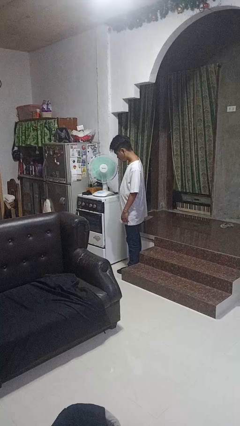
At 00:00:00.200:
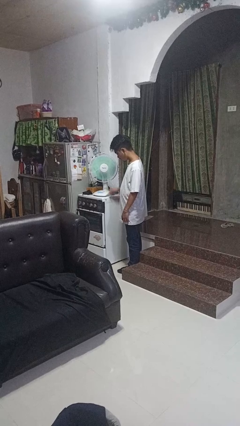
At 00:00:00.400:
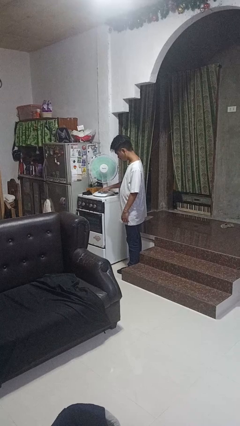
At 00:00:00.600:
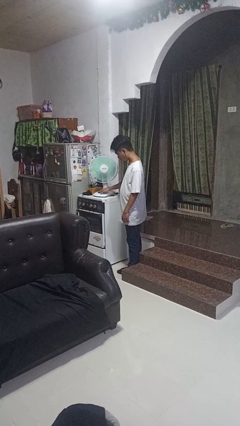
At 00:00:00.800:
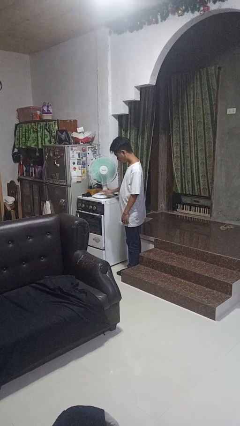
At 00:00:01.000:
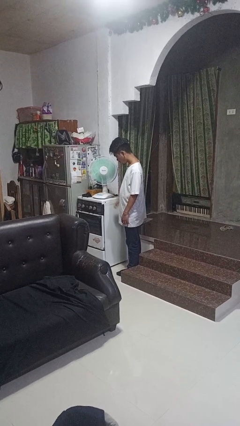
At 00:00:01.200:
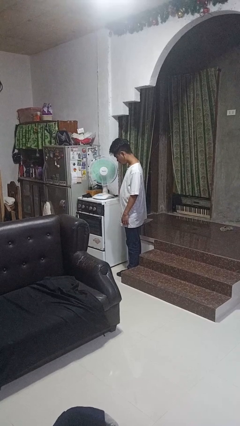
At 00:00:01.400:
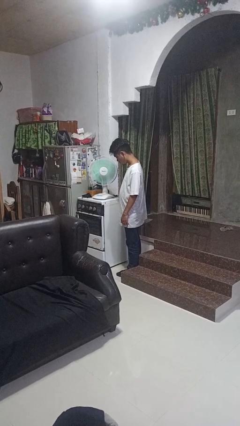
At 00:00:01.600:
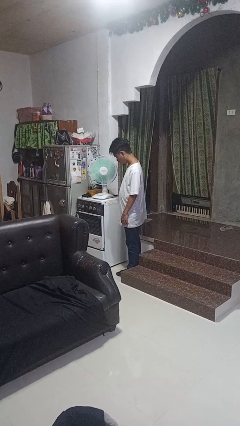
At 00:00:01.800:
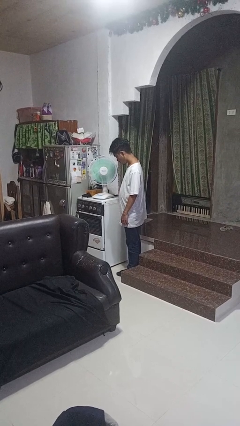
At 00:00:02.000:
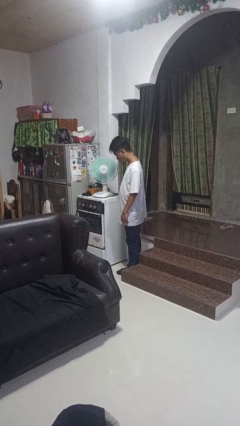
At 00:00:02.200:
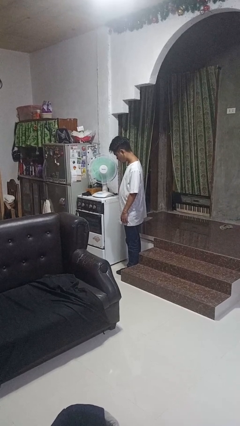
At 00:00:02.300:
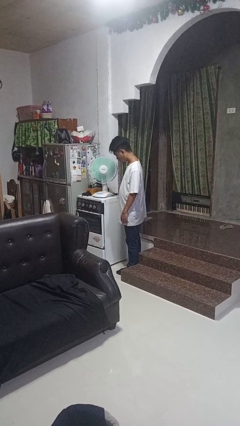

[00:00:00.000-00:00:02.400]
person turns off fan

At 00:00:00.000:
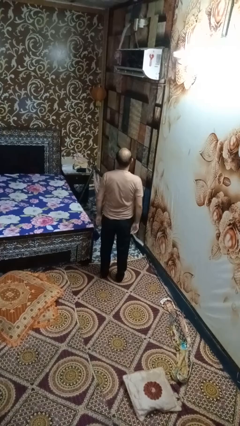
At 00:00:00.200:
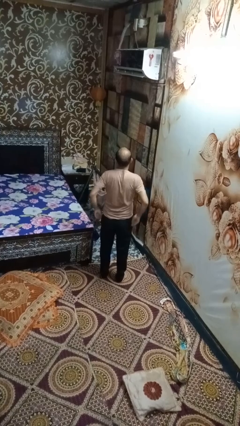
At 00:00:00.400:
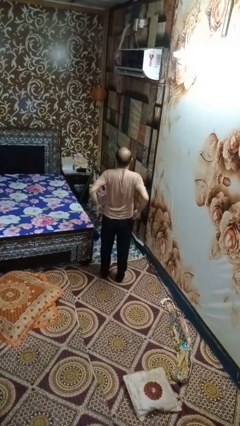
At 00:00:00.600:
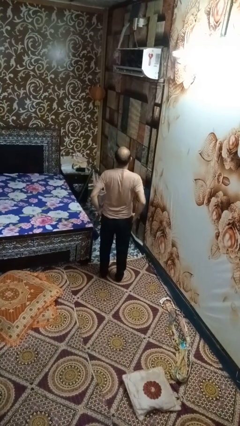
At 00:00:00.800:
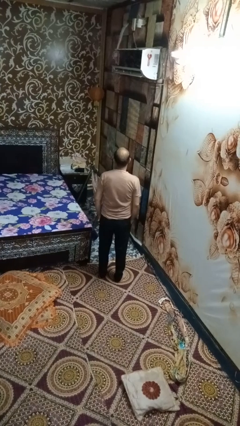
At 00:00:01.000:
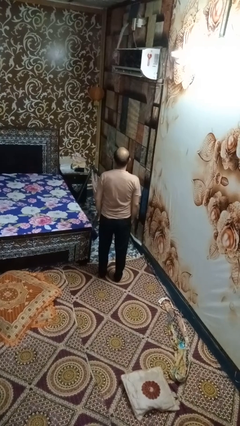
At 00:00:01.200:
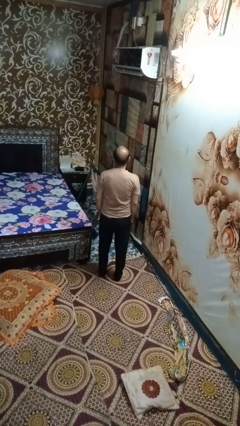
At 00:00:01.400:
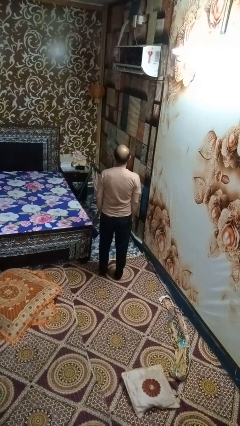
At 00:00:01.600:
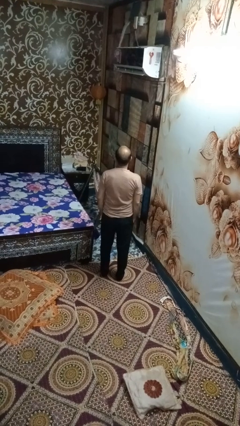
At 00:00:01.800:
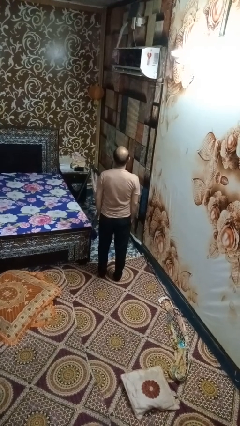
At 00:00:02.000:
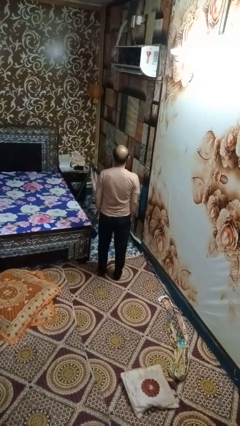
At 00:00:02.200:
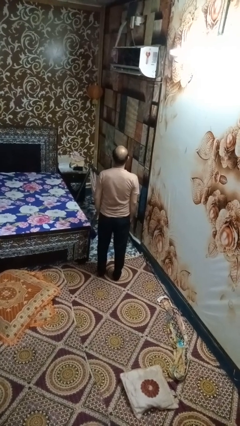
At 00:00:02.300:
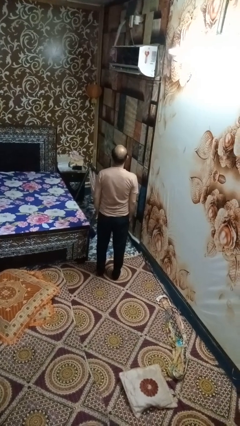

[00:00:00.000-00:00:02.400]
person puts hands in back pockets

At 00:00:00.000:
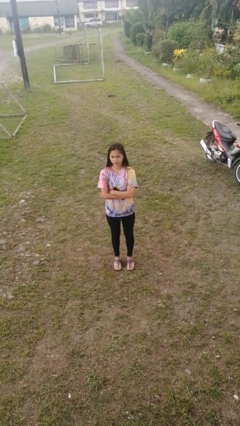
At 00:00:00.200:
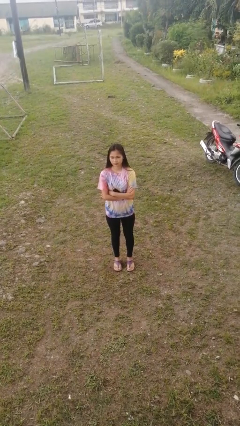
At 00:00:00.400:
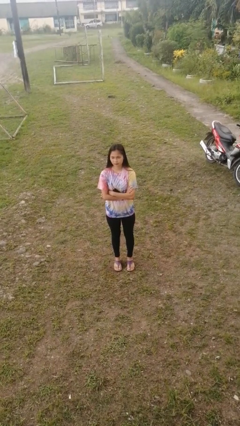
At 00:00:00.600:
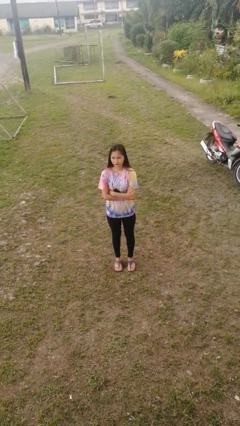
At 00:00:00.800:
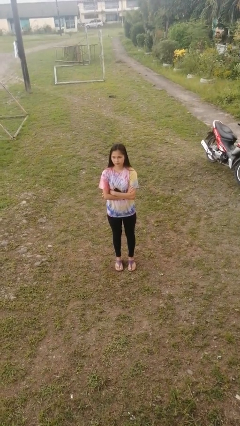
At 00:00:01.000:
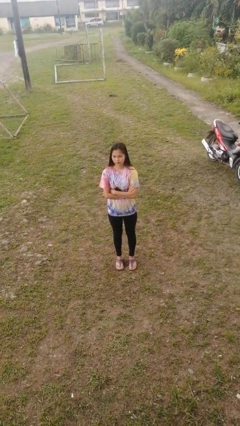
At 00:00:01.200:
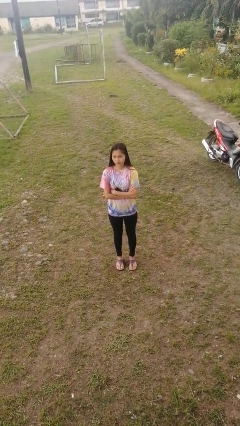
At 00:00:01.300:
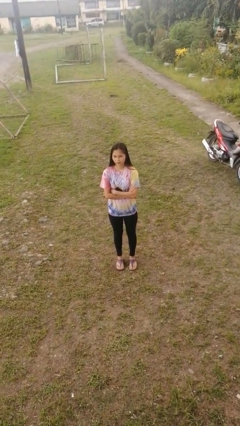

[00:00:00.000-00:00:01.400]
person crosses arms

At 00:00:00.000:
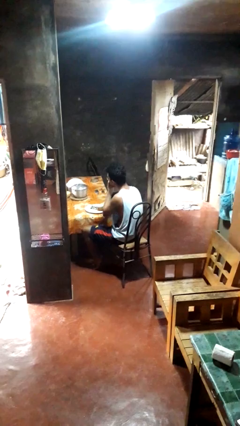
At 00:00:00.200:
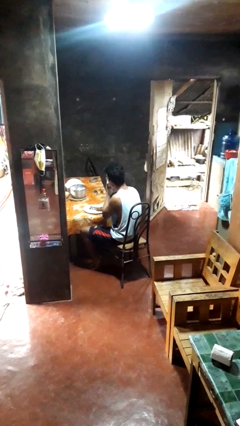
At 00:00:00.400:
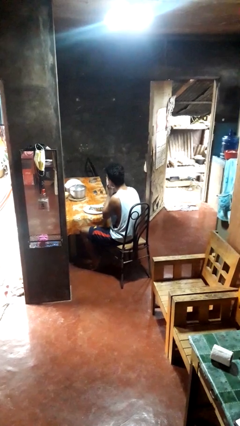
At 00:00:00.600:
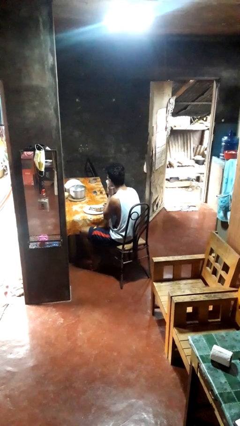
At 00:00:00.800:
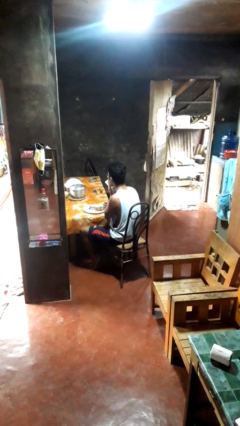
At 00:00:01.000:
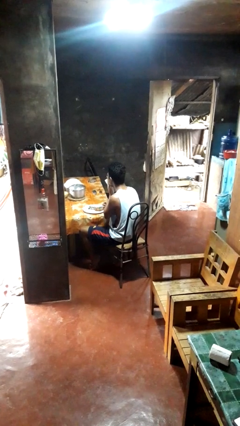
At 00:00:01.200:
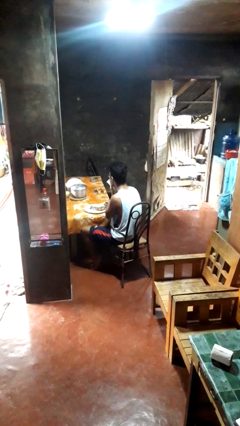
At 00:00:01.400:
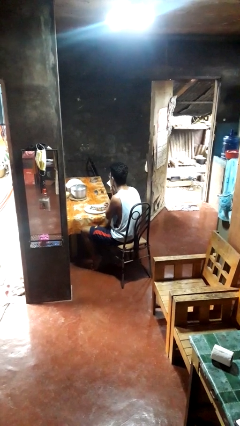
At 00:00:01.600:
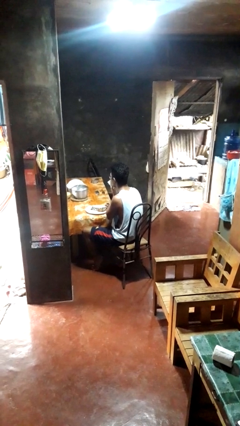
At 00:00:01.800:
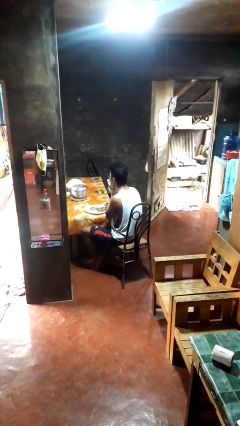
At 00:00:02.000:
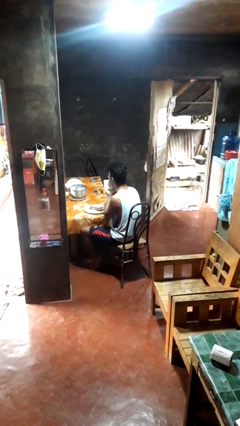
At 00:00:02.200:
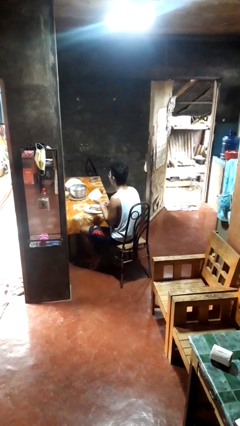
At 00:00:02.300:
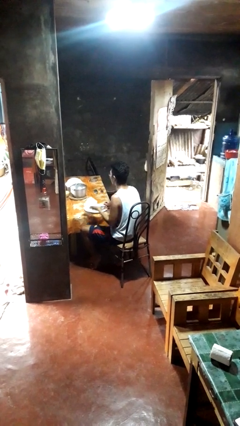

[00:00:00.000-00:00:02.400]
person wipes mouth with napkin

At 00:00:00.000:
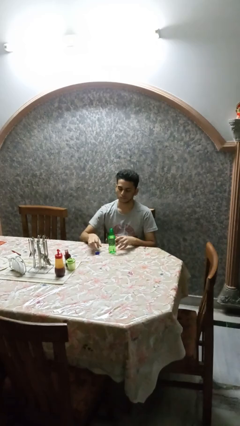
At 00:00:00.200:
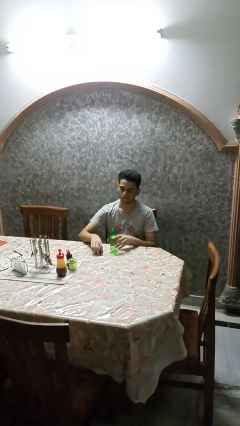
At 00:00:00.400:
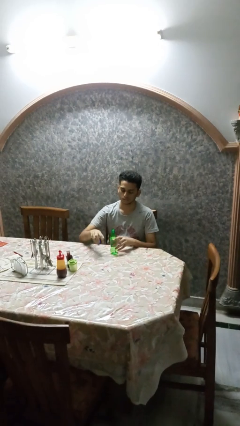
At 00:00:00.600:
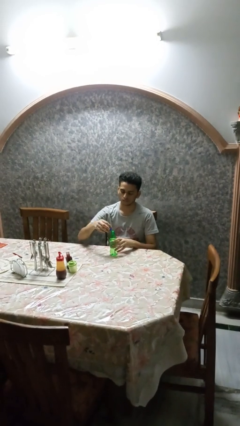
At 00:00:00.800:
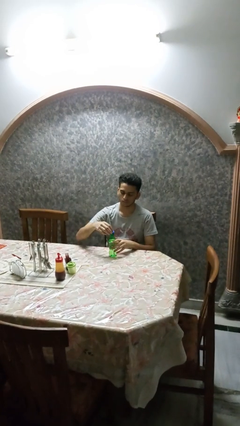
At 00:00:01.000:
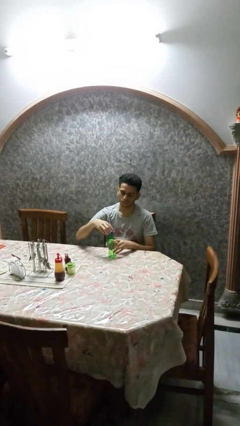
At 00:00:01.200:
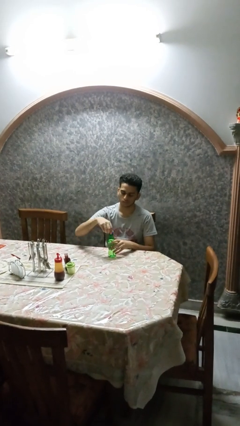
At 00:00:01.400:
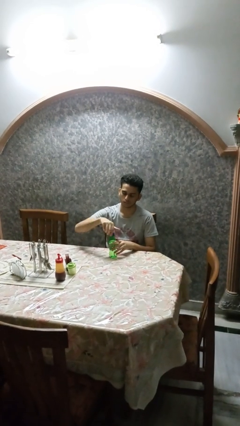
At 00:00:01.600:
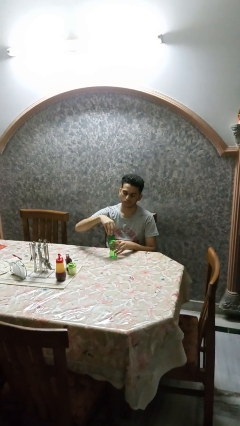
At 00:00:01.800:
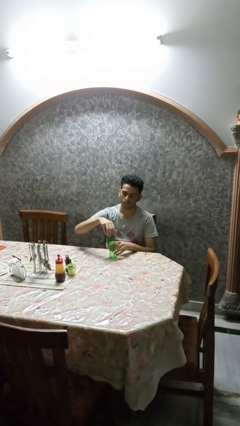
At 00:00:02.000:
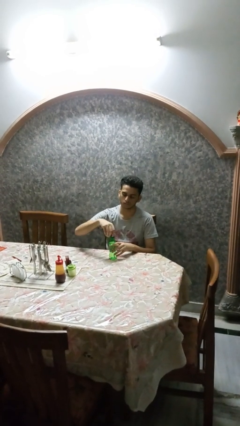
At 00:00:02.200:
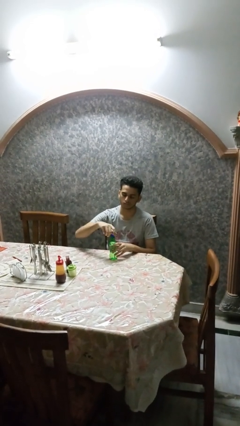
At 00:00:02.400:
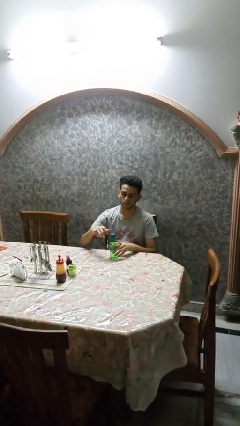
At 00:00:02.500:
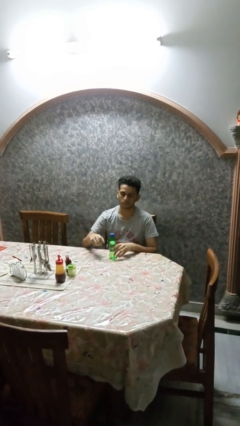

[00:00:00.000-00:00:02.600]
person screws lid to bottle

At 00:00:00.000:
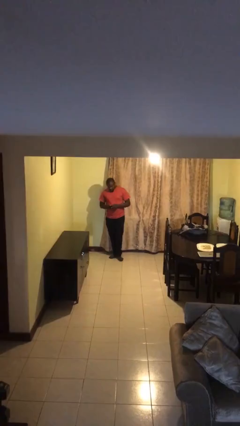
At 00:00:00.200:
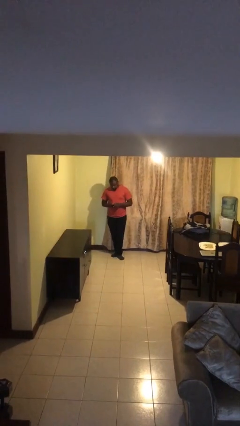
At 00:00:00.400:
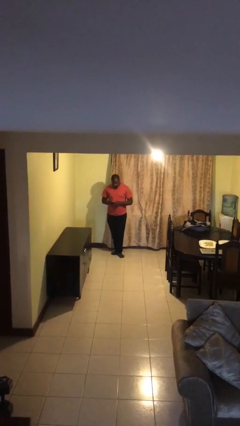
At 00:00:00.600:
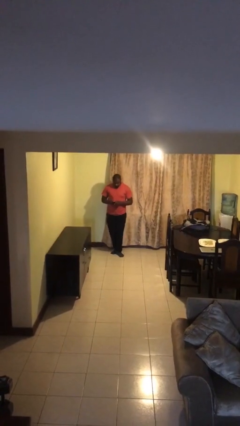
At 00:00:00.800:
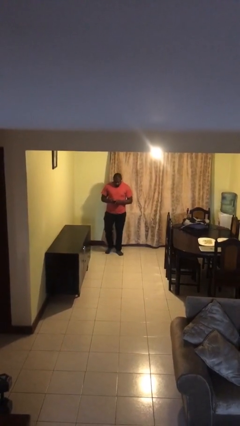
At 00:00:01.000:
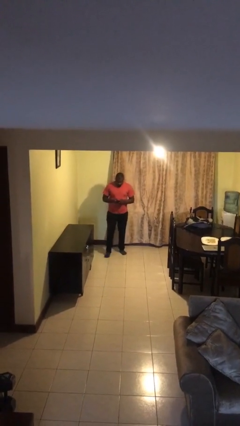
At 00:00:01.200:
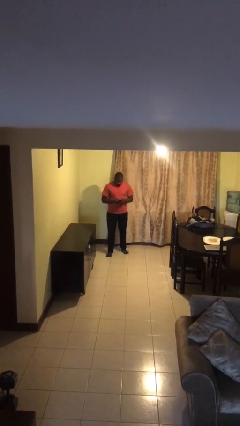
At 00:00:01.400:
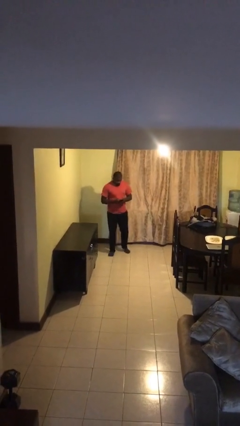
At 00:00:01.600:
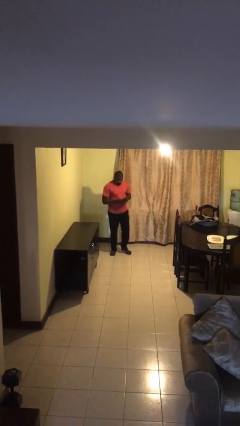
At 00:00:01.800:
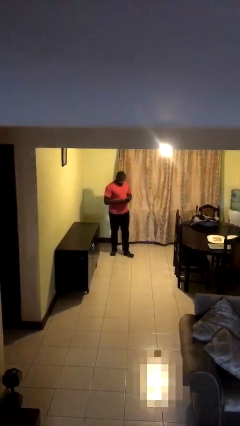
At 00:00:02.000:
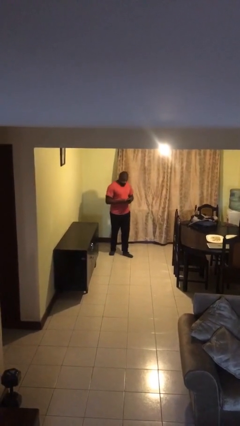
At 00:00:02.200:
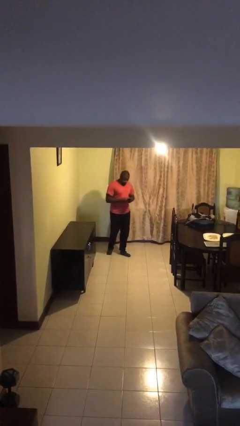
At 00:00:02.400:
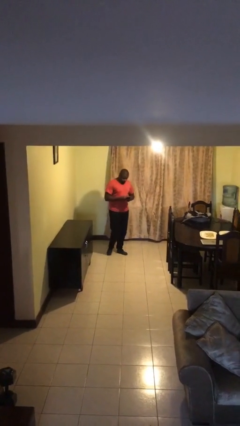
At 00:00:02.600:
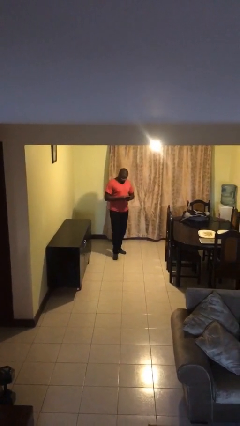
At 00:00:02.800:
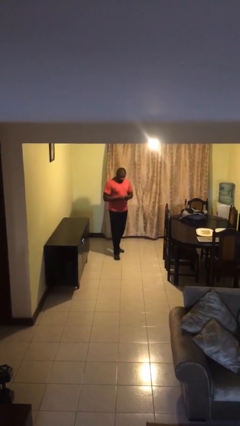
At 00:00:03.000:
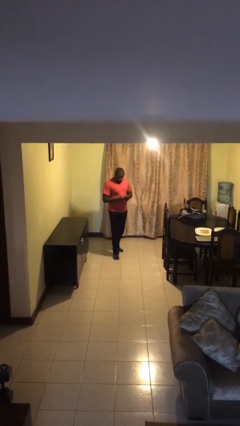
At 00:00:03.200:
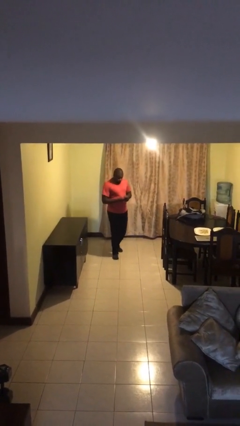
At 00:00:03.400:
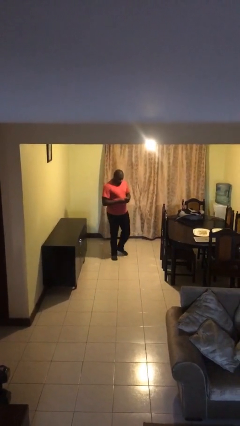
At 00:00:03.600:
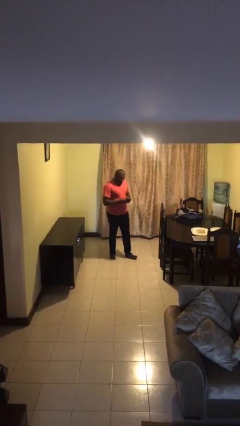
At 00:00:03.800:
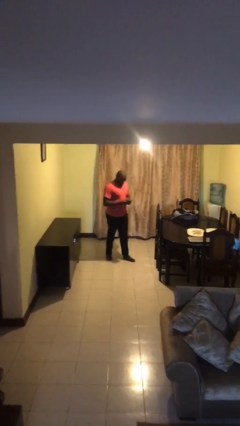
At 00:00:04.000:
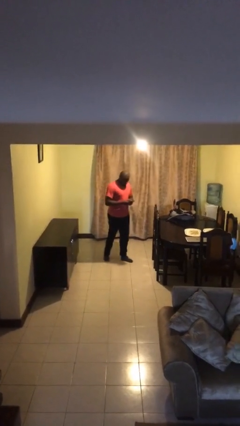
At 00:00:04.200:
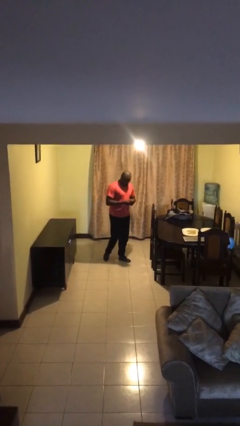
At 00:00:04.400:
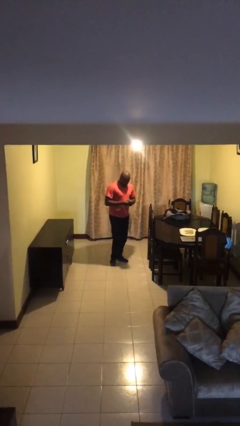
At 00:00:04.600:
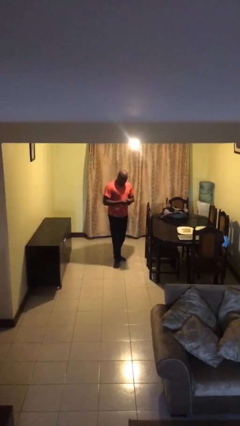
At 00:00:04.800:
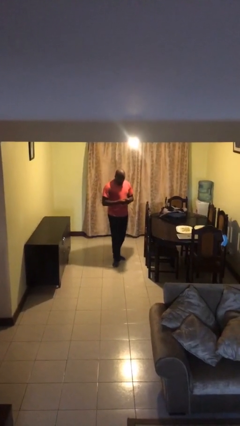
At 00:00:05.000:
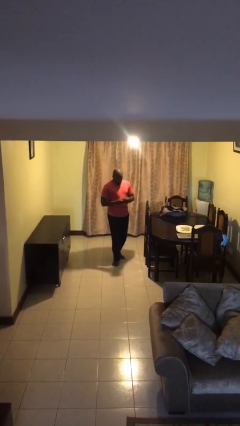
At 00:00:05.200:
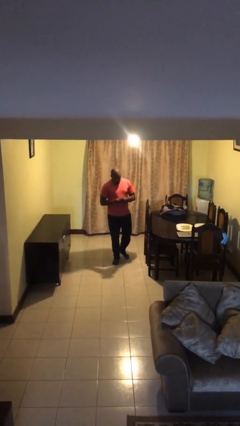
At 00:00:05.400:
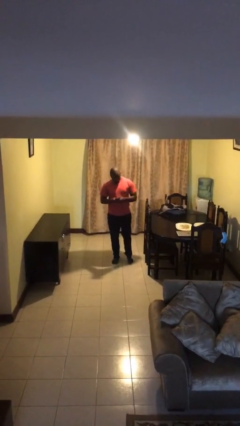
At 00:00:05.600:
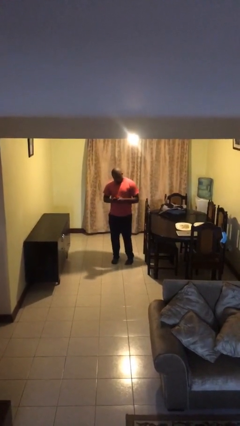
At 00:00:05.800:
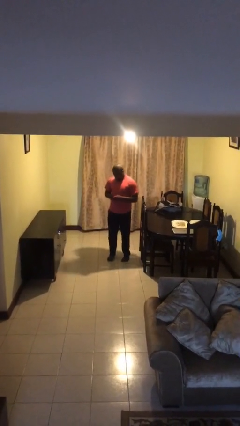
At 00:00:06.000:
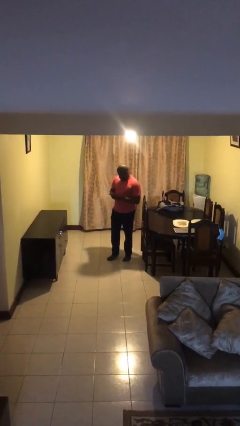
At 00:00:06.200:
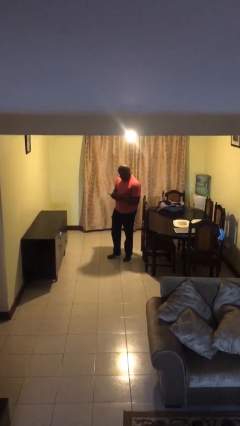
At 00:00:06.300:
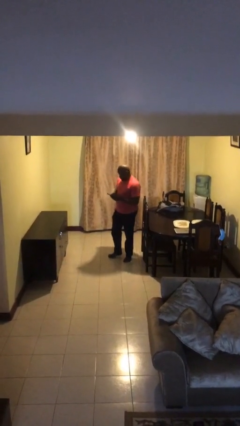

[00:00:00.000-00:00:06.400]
person texts on phone
